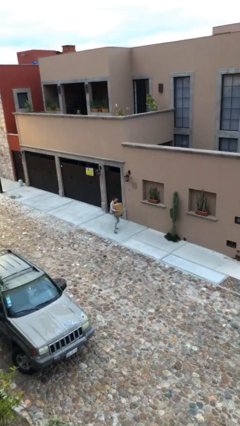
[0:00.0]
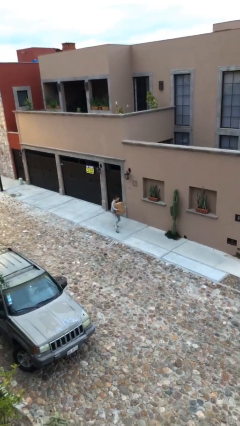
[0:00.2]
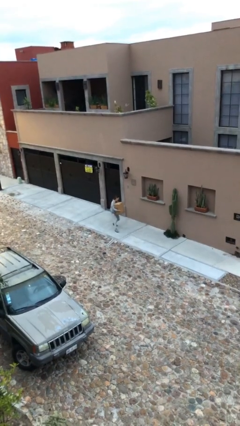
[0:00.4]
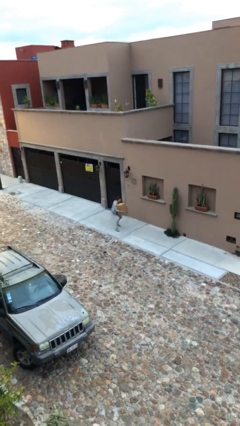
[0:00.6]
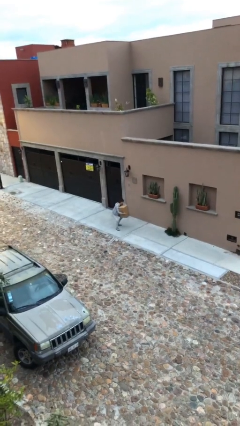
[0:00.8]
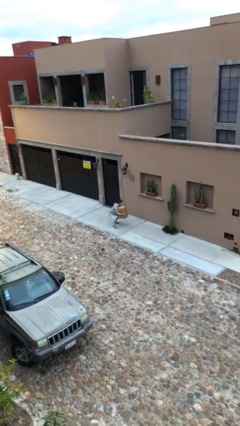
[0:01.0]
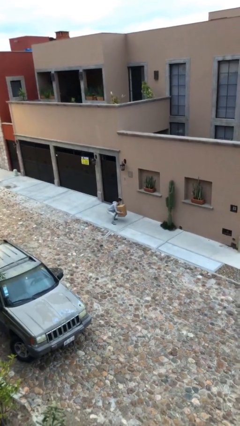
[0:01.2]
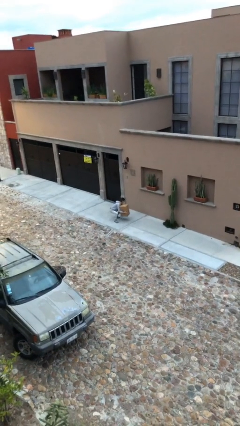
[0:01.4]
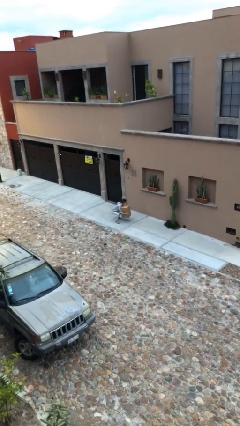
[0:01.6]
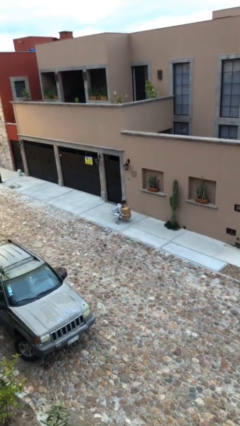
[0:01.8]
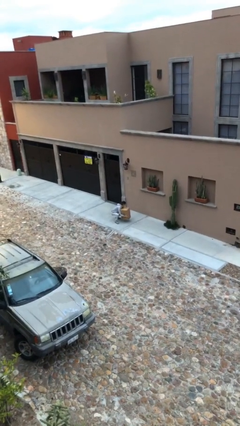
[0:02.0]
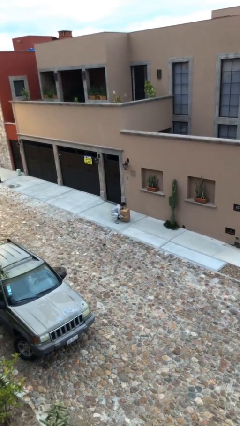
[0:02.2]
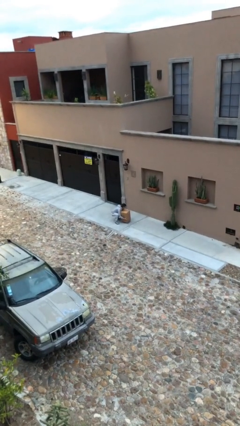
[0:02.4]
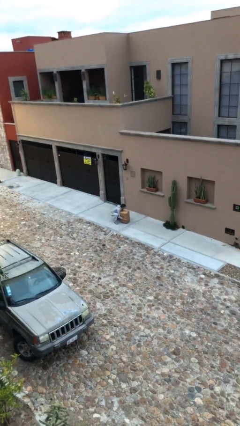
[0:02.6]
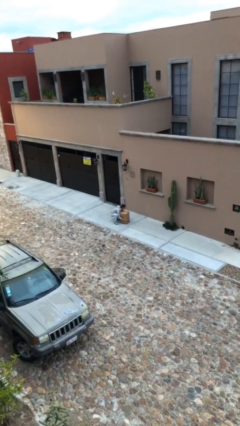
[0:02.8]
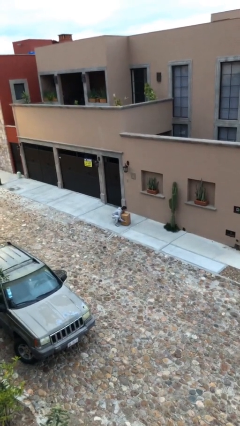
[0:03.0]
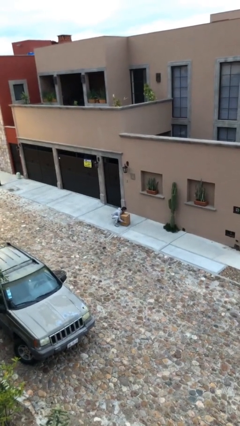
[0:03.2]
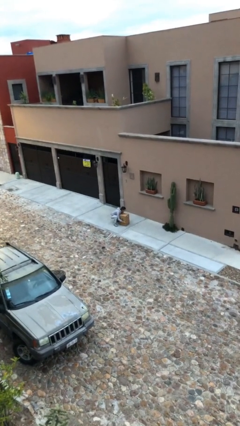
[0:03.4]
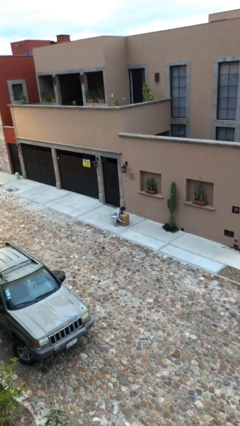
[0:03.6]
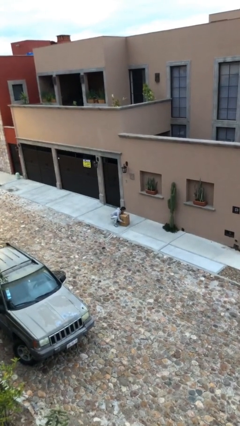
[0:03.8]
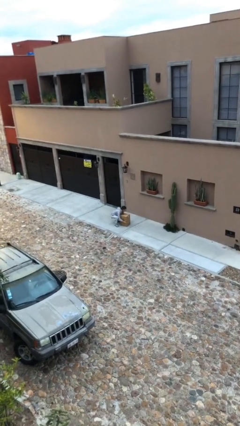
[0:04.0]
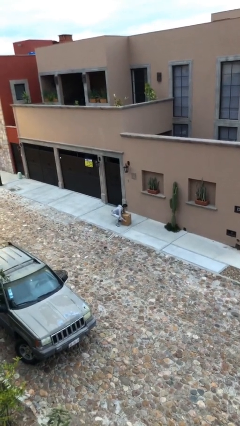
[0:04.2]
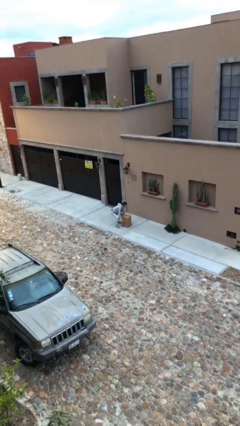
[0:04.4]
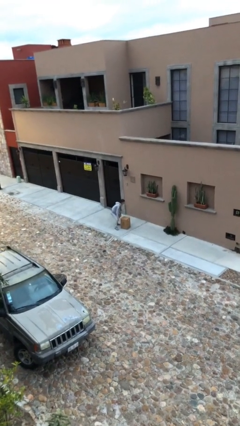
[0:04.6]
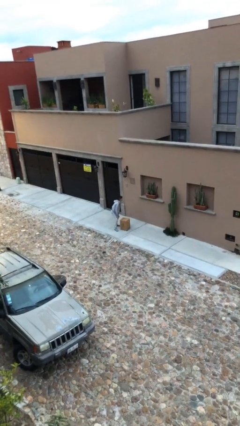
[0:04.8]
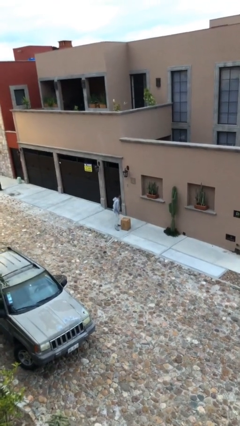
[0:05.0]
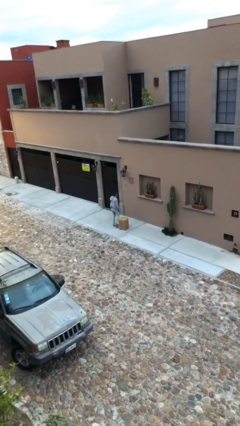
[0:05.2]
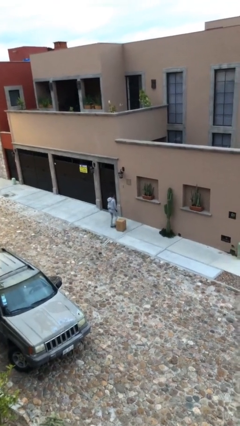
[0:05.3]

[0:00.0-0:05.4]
person puts down object on floor

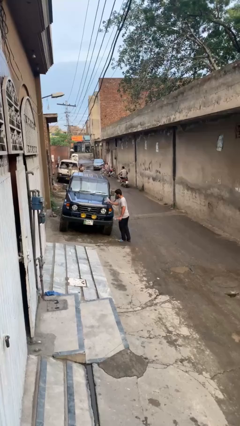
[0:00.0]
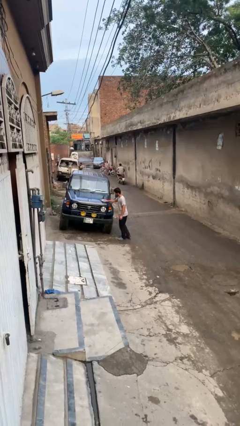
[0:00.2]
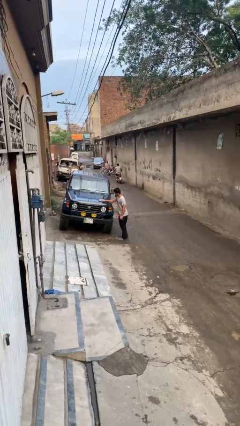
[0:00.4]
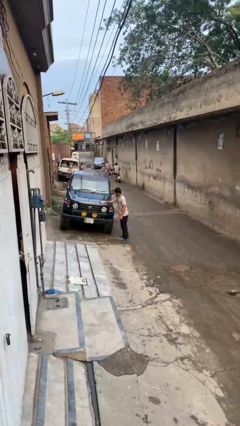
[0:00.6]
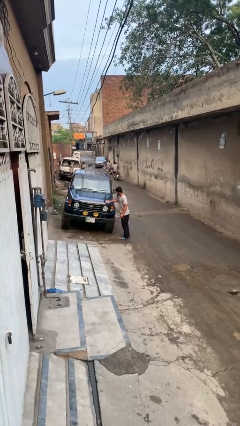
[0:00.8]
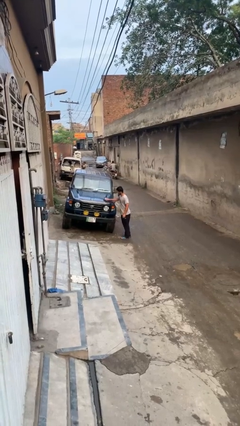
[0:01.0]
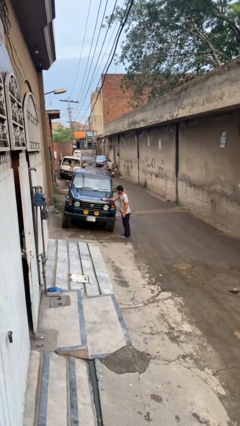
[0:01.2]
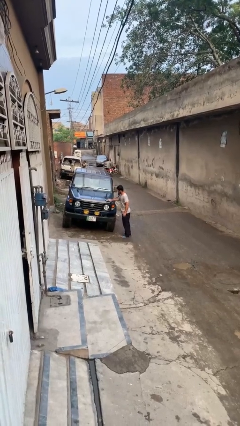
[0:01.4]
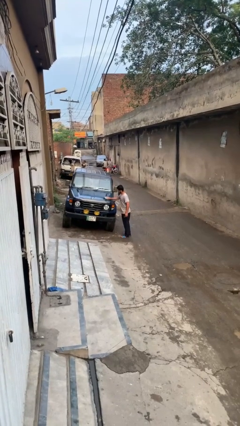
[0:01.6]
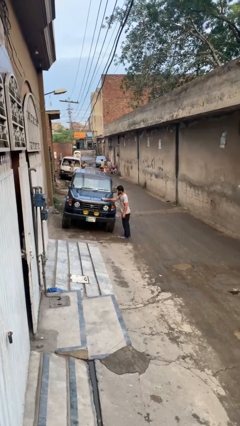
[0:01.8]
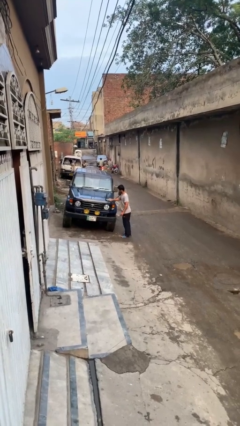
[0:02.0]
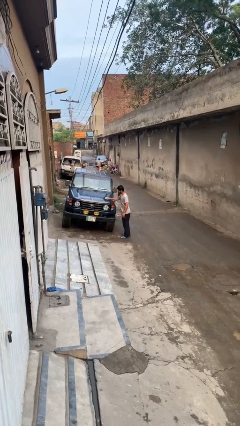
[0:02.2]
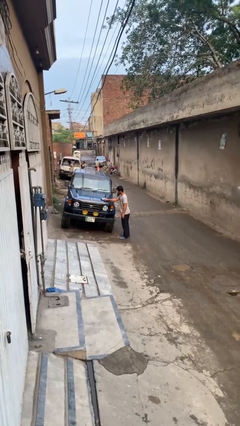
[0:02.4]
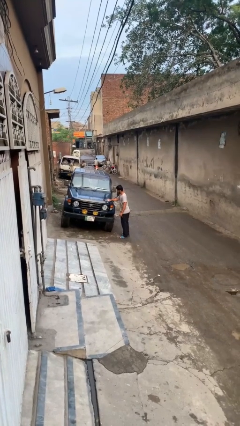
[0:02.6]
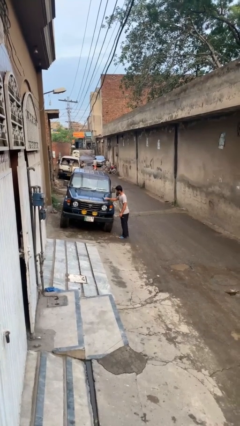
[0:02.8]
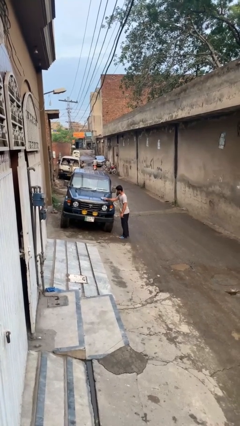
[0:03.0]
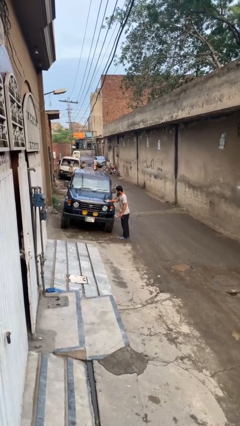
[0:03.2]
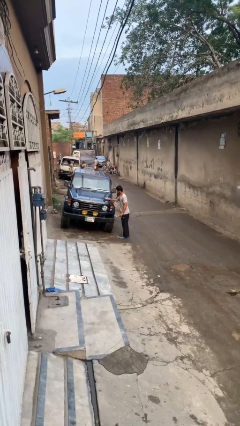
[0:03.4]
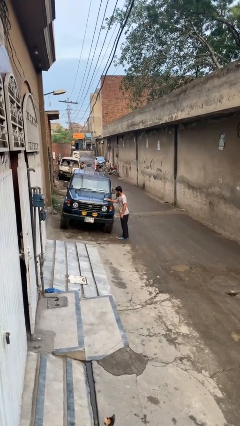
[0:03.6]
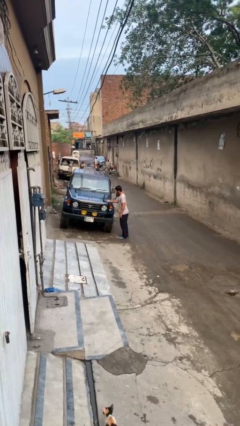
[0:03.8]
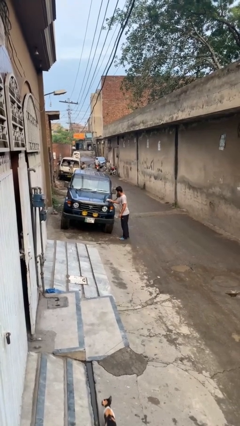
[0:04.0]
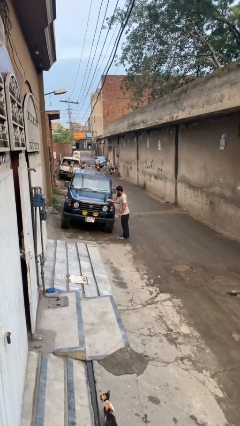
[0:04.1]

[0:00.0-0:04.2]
person polishes car with rag

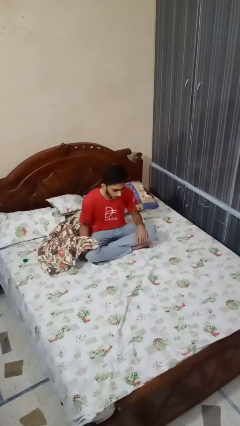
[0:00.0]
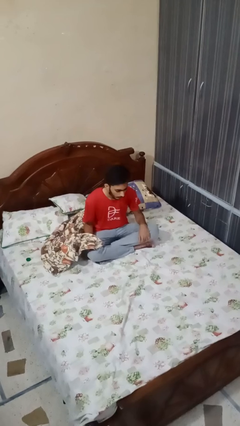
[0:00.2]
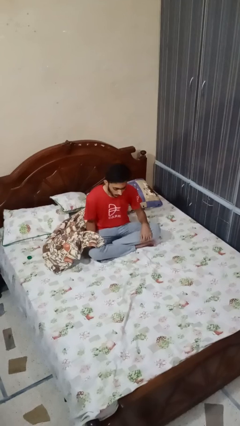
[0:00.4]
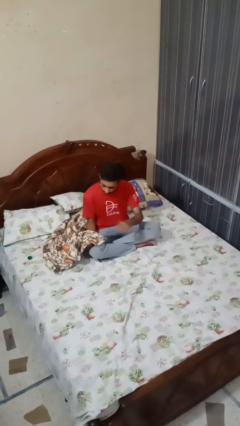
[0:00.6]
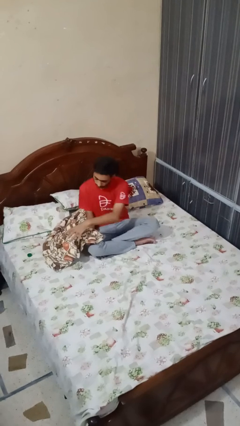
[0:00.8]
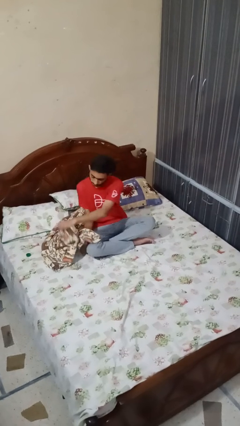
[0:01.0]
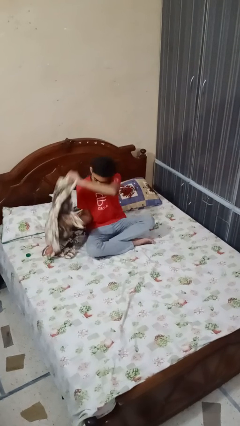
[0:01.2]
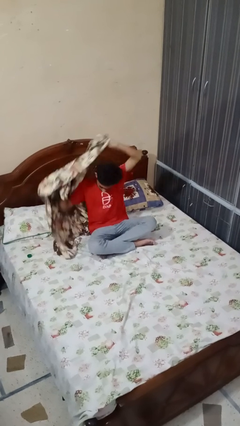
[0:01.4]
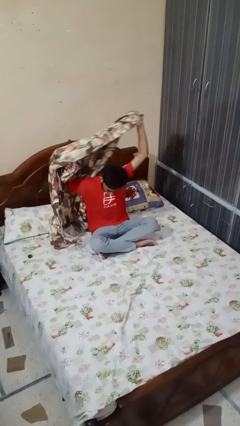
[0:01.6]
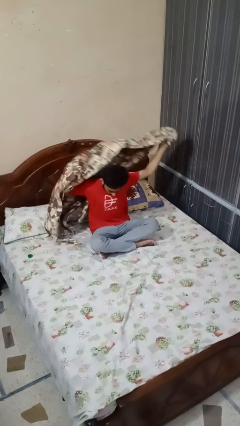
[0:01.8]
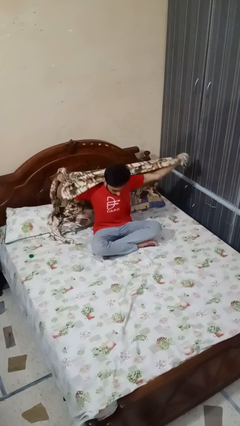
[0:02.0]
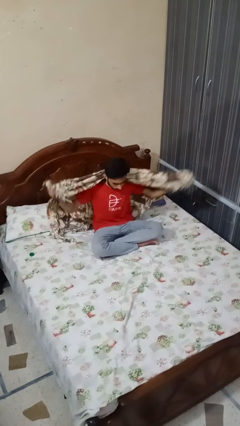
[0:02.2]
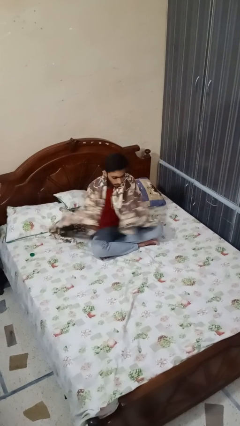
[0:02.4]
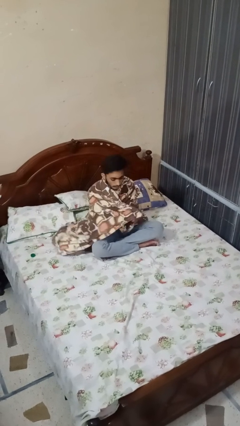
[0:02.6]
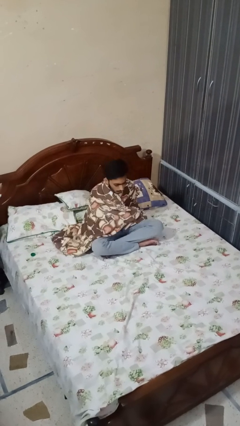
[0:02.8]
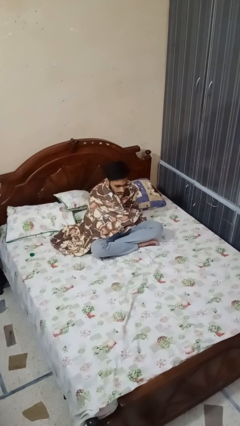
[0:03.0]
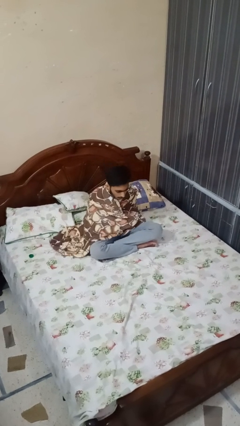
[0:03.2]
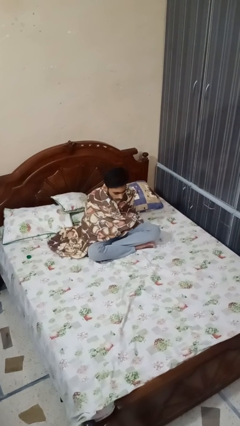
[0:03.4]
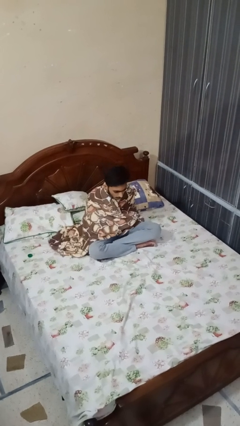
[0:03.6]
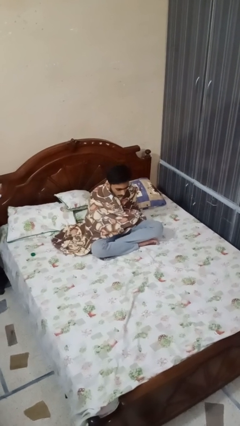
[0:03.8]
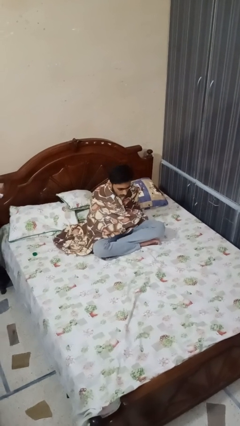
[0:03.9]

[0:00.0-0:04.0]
person covers with blanket

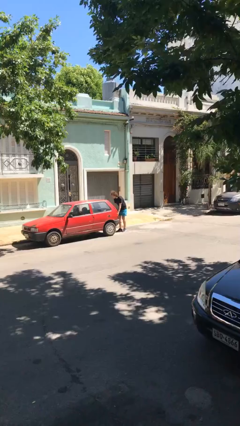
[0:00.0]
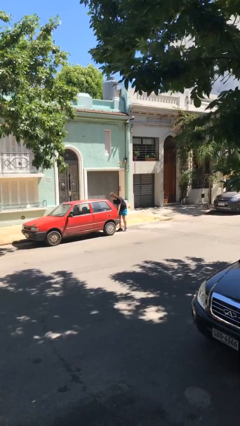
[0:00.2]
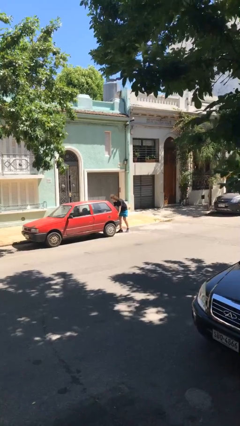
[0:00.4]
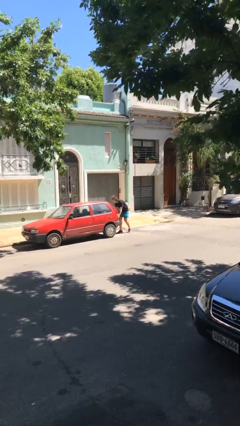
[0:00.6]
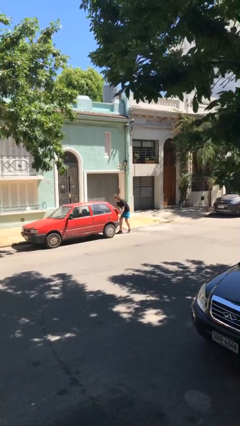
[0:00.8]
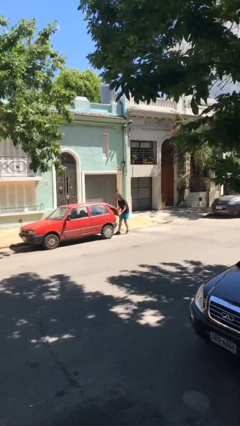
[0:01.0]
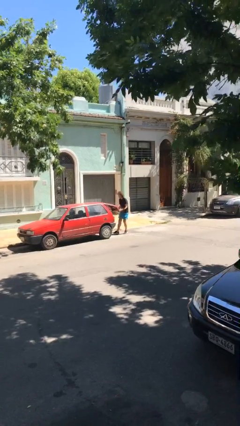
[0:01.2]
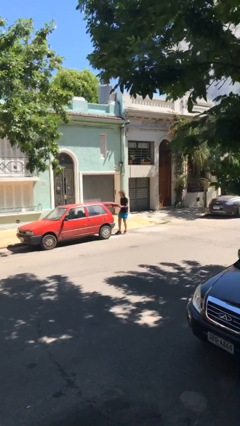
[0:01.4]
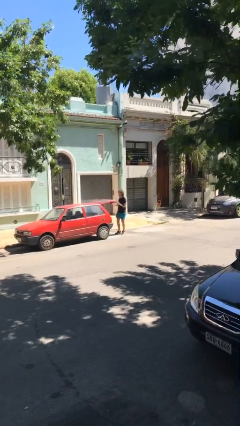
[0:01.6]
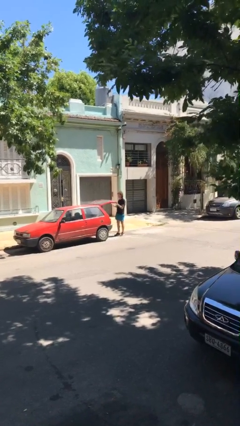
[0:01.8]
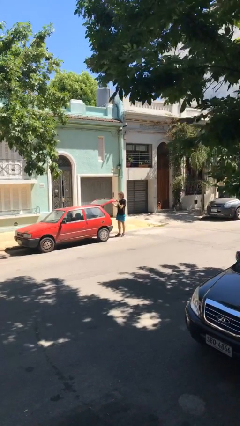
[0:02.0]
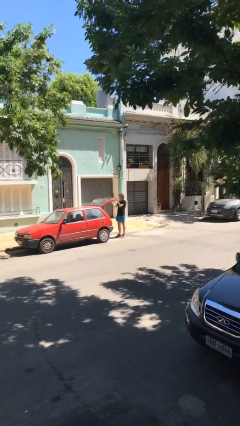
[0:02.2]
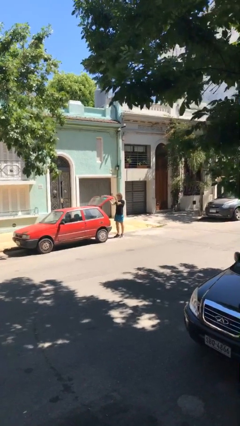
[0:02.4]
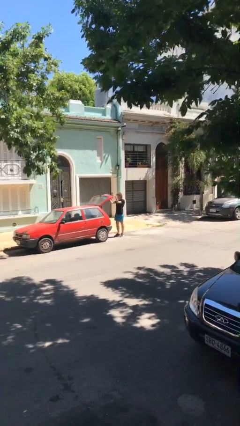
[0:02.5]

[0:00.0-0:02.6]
person opens car trunk

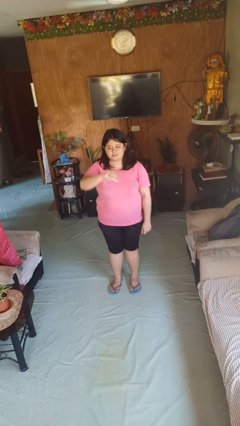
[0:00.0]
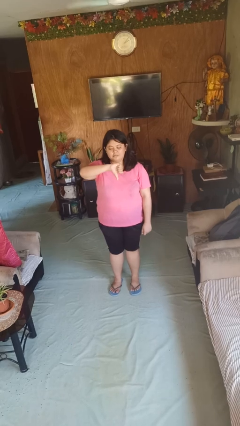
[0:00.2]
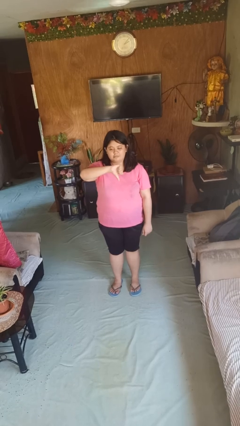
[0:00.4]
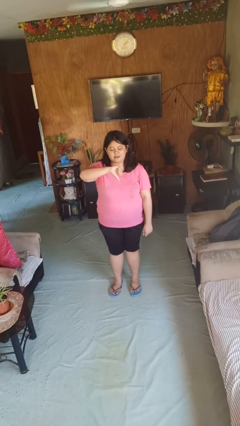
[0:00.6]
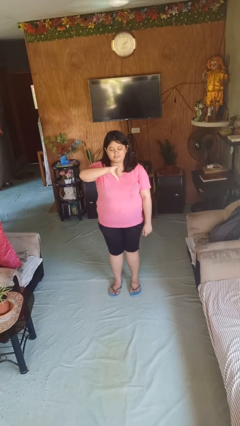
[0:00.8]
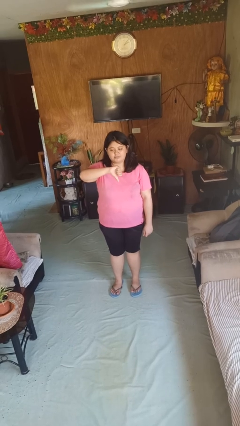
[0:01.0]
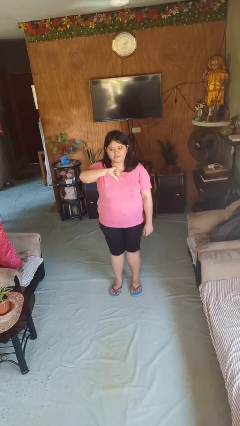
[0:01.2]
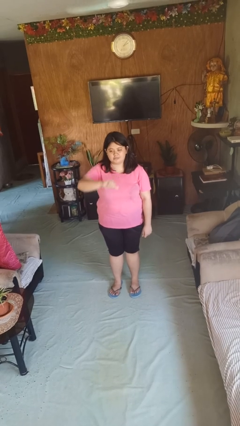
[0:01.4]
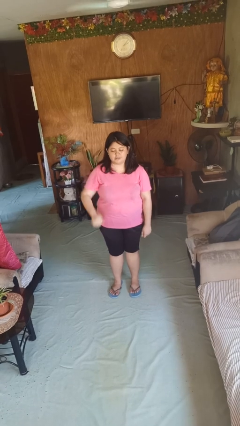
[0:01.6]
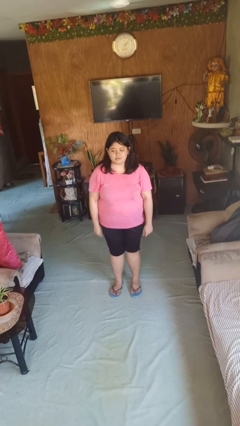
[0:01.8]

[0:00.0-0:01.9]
person gestures thumbs down
